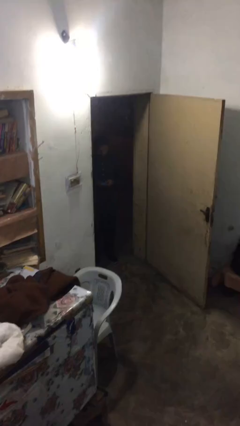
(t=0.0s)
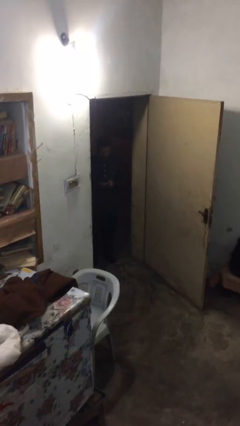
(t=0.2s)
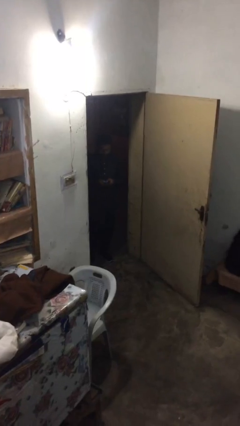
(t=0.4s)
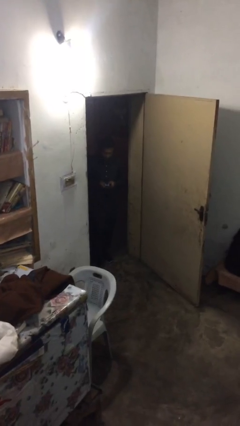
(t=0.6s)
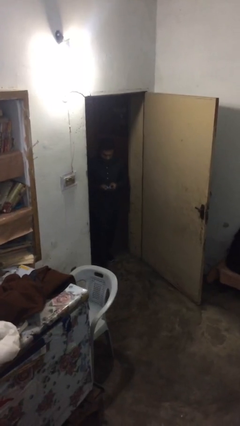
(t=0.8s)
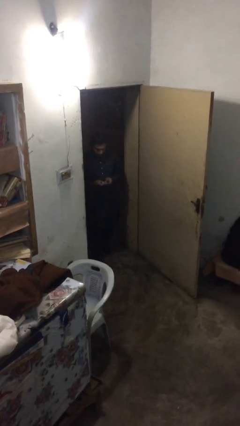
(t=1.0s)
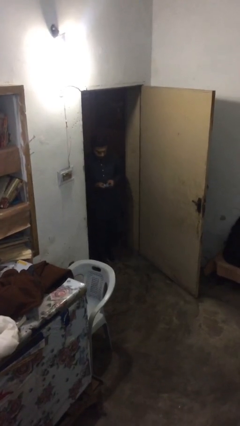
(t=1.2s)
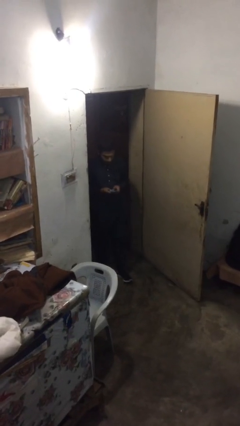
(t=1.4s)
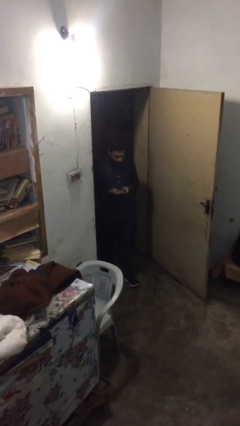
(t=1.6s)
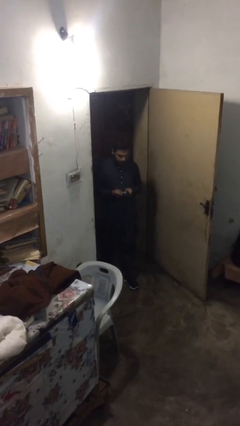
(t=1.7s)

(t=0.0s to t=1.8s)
person enters scene through structure

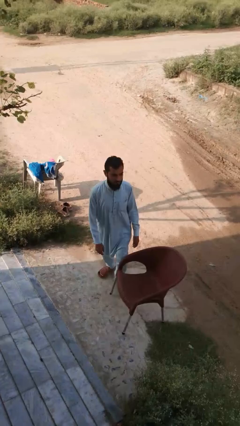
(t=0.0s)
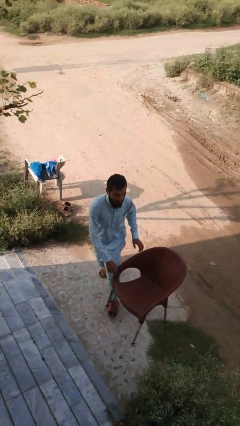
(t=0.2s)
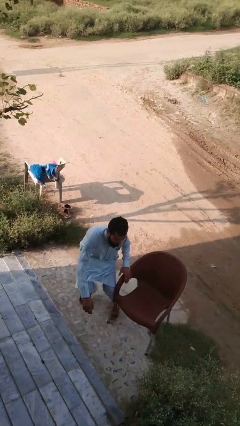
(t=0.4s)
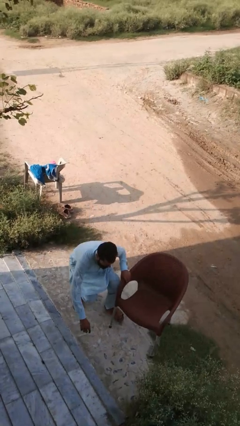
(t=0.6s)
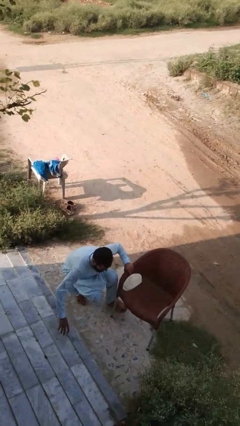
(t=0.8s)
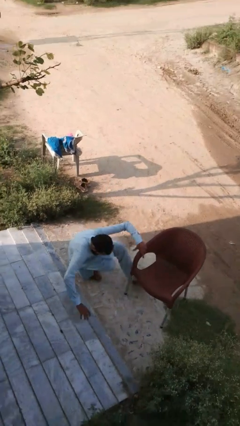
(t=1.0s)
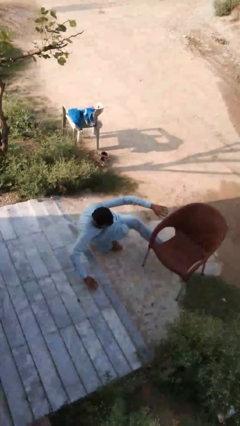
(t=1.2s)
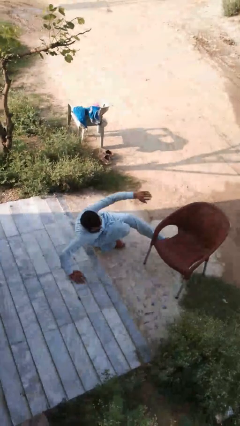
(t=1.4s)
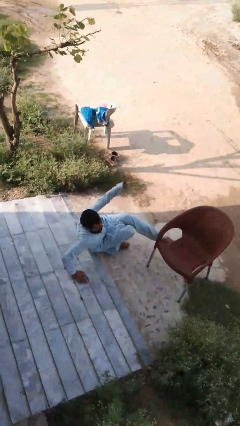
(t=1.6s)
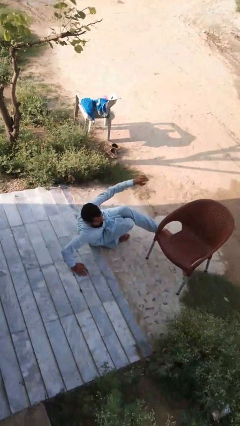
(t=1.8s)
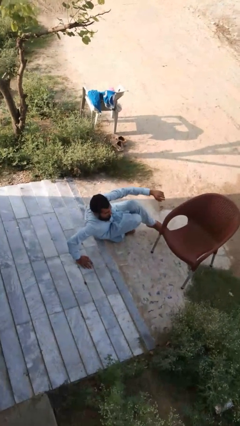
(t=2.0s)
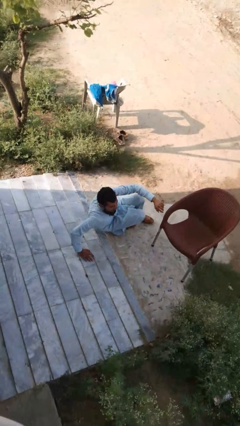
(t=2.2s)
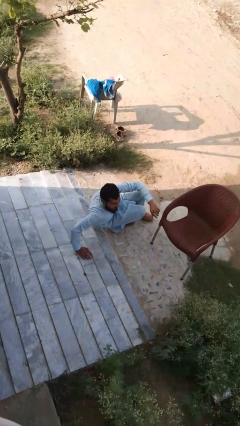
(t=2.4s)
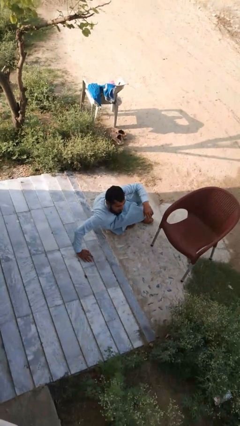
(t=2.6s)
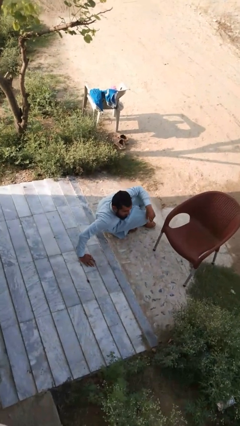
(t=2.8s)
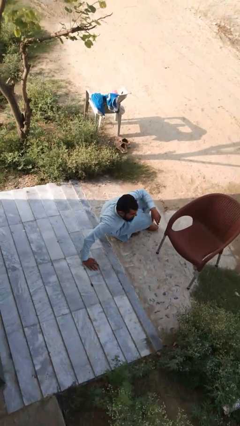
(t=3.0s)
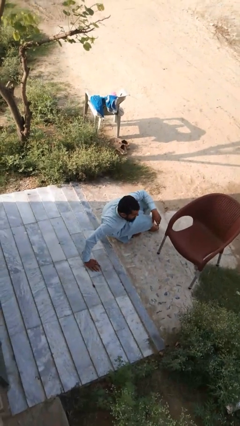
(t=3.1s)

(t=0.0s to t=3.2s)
person trips on object on floor

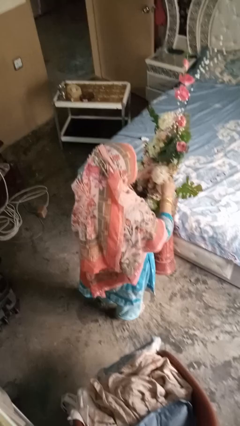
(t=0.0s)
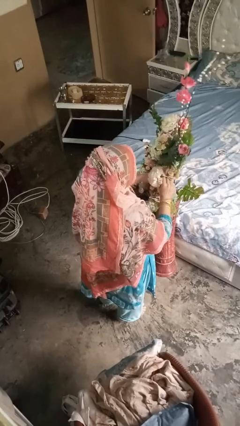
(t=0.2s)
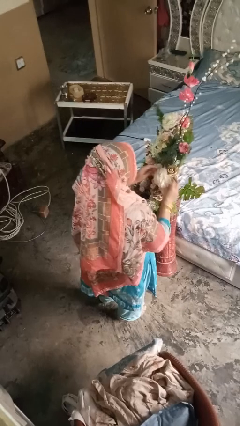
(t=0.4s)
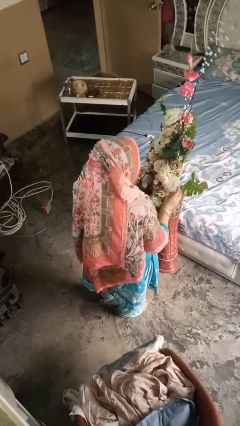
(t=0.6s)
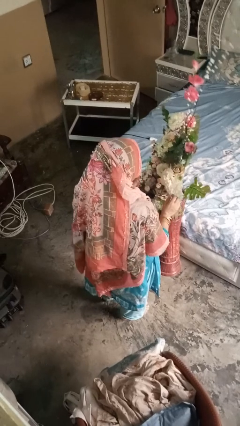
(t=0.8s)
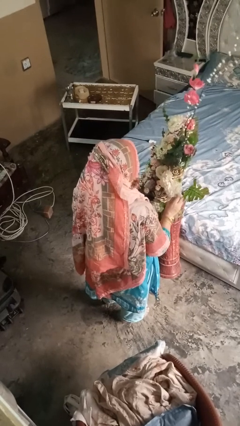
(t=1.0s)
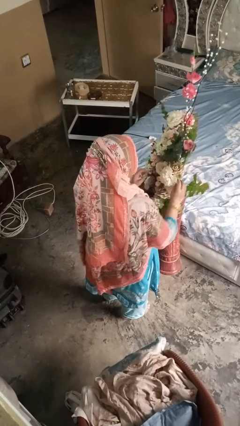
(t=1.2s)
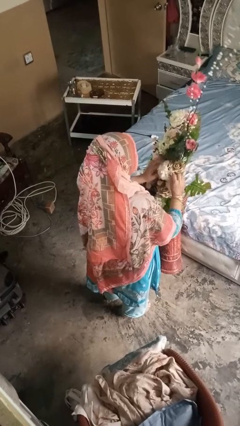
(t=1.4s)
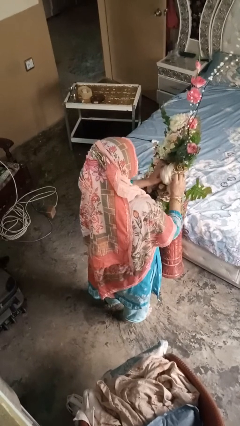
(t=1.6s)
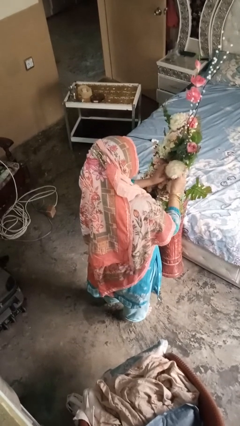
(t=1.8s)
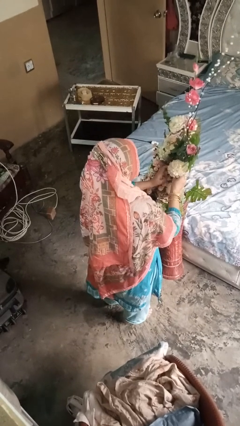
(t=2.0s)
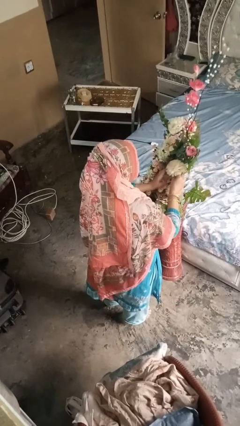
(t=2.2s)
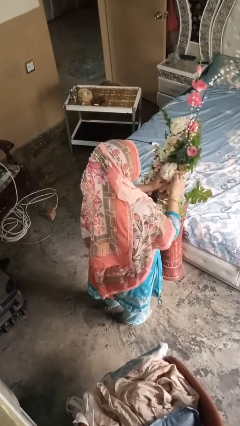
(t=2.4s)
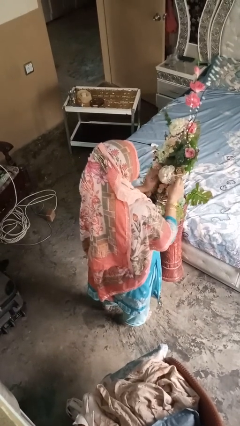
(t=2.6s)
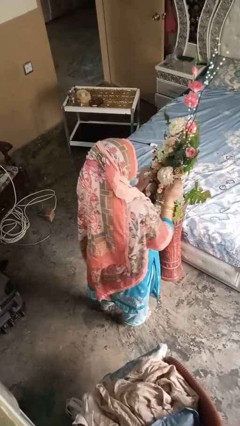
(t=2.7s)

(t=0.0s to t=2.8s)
person arranges flowers in vase

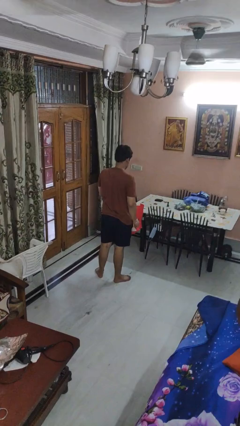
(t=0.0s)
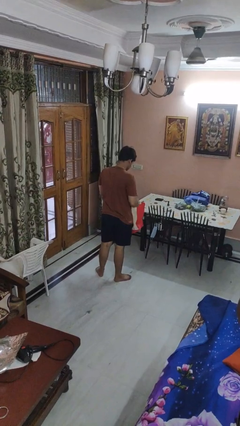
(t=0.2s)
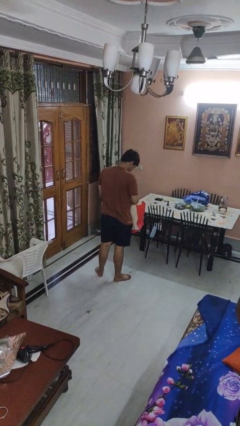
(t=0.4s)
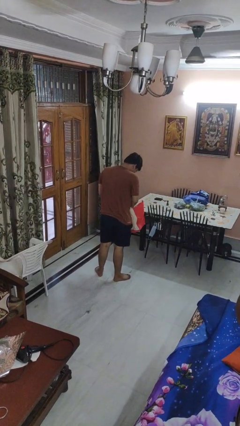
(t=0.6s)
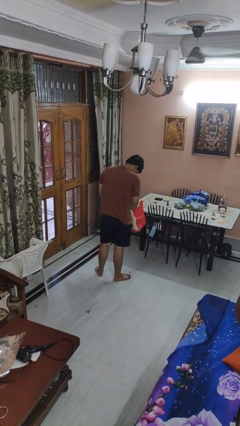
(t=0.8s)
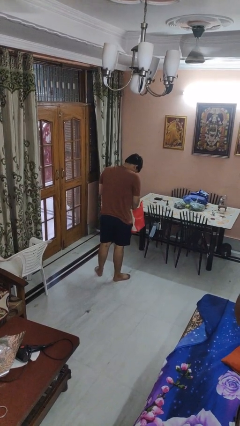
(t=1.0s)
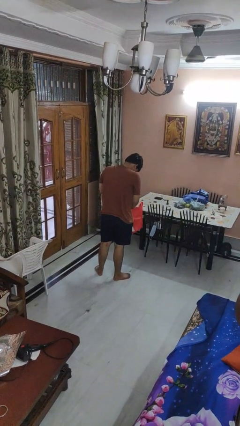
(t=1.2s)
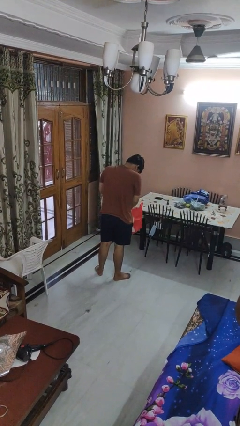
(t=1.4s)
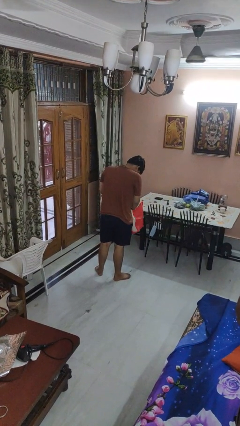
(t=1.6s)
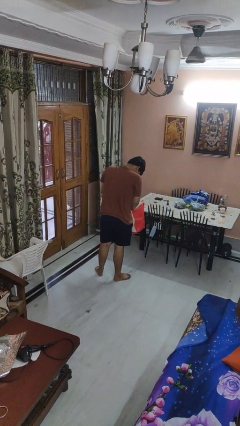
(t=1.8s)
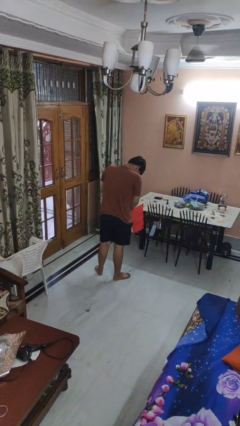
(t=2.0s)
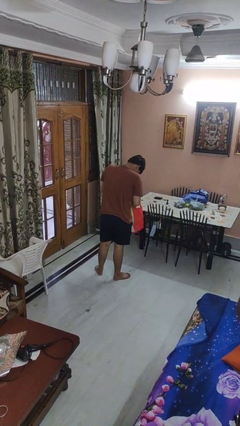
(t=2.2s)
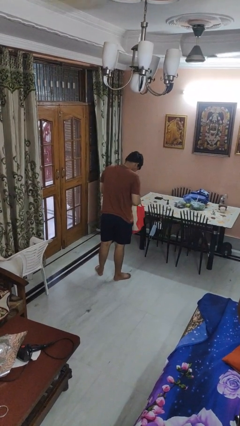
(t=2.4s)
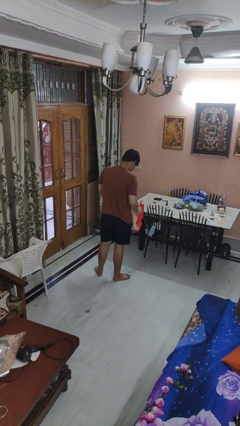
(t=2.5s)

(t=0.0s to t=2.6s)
person searches in bag

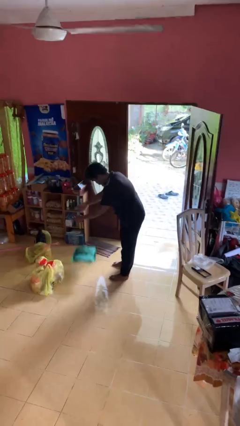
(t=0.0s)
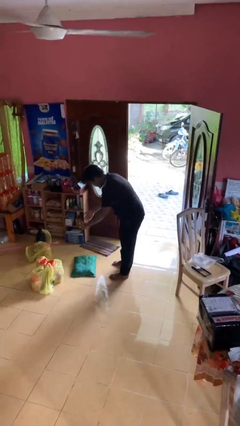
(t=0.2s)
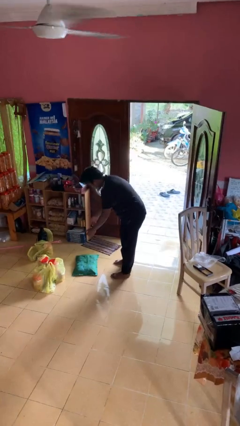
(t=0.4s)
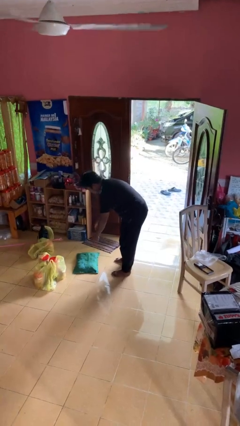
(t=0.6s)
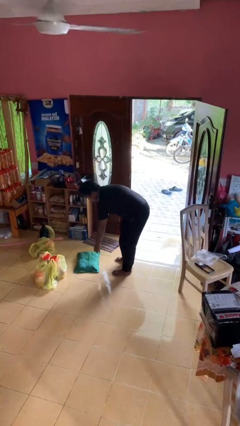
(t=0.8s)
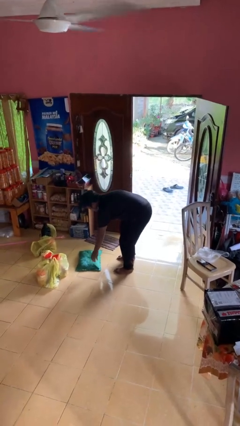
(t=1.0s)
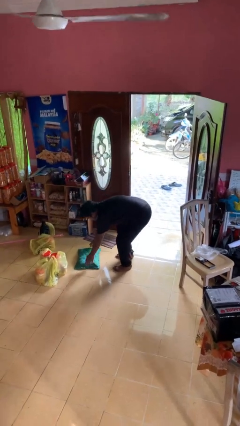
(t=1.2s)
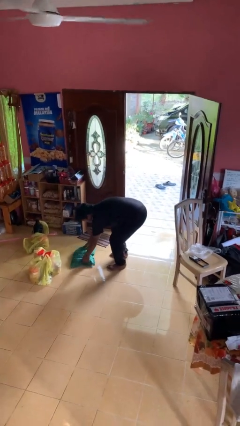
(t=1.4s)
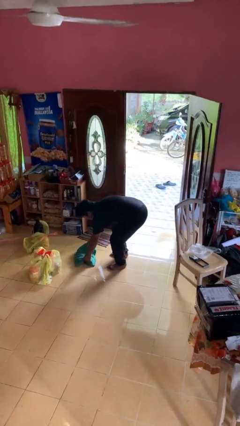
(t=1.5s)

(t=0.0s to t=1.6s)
person catches dropped object

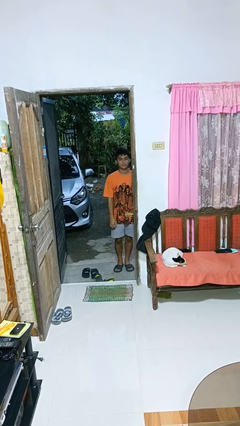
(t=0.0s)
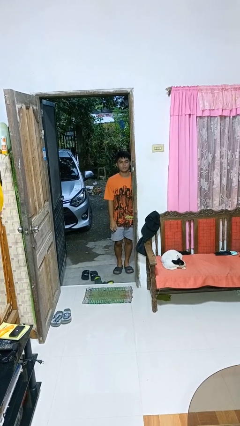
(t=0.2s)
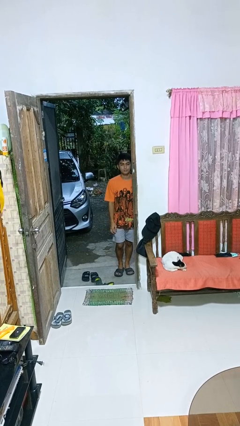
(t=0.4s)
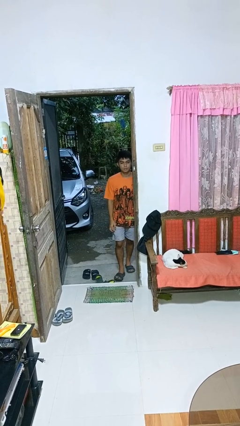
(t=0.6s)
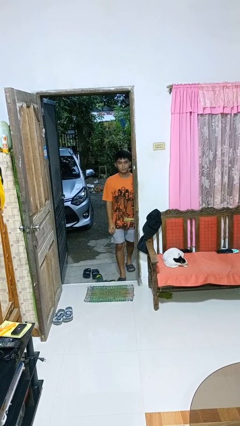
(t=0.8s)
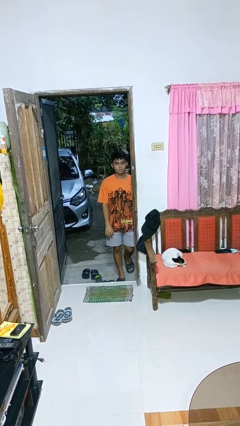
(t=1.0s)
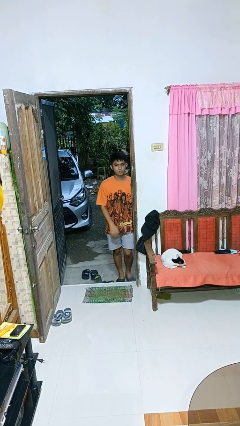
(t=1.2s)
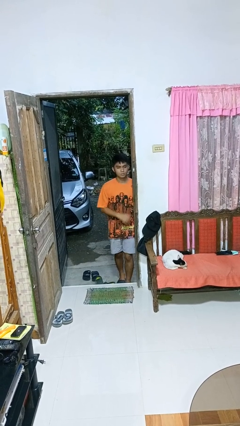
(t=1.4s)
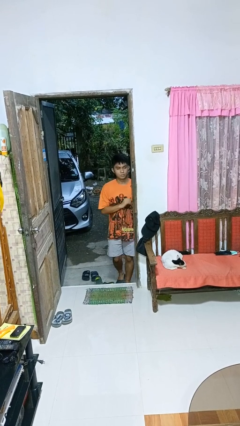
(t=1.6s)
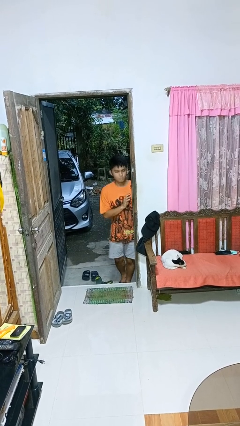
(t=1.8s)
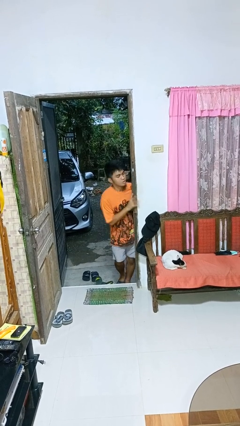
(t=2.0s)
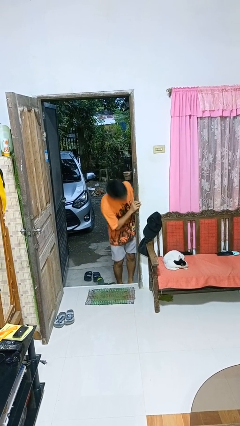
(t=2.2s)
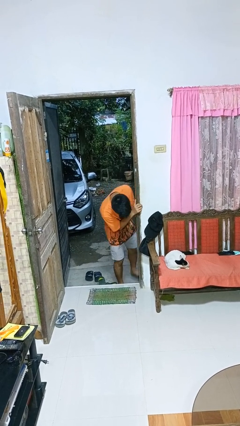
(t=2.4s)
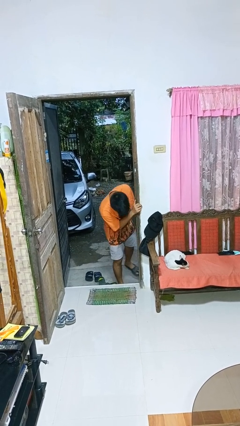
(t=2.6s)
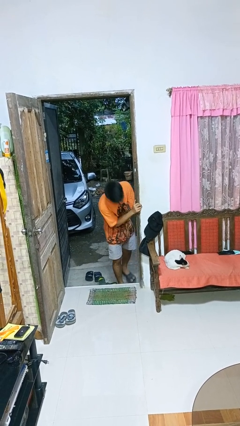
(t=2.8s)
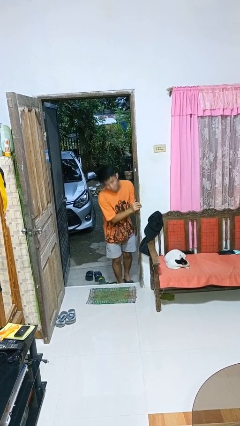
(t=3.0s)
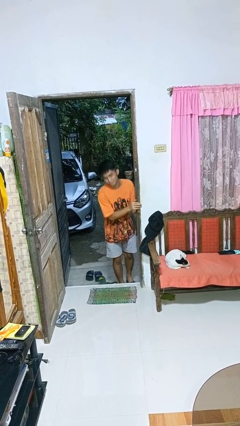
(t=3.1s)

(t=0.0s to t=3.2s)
person bumps into wall

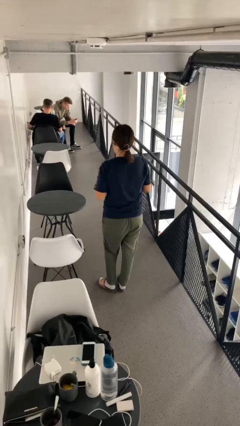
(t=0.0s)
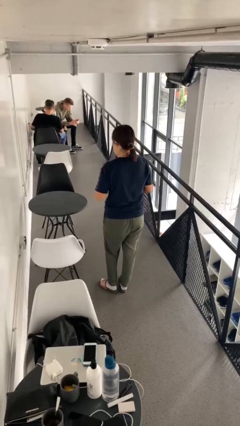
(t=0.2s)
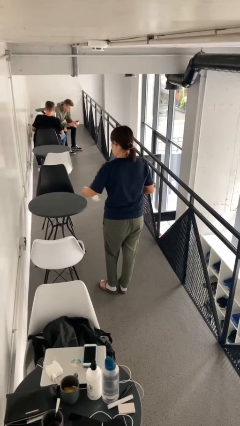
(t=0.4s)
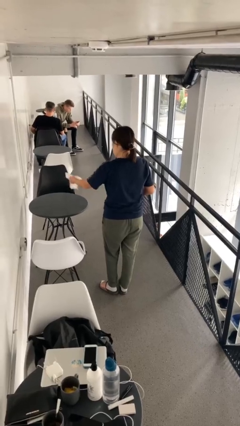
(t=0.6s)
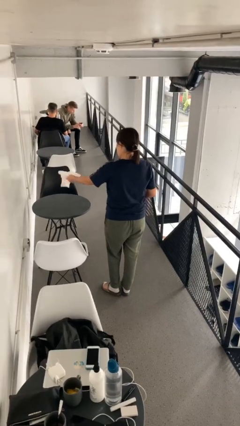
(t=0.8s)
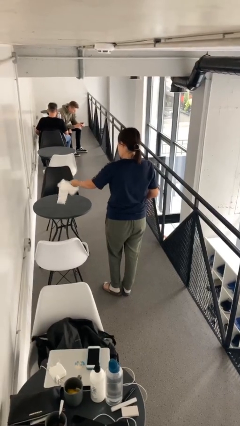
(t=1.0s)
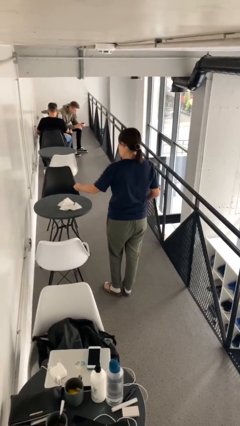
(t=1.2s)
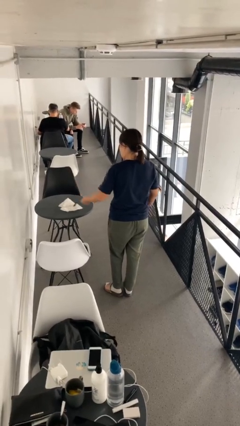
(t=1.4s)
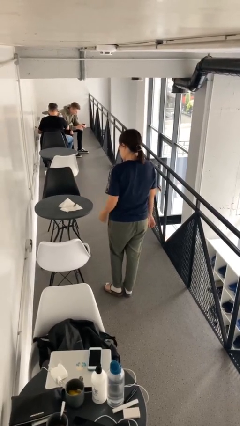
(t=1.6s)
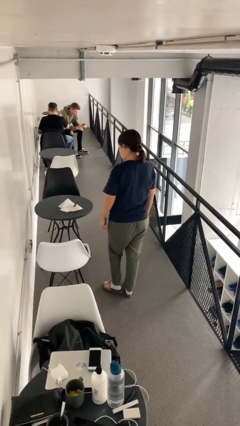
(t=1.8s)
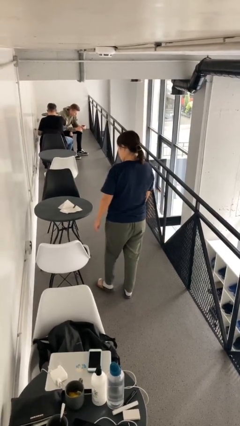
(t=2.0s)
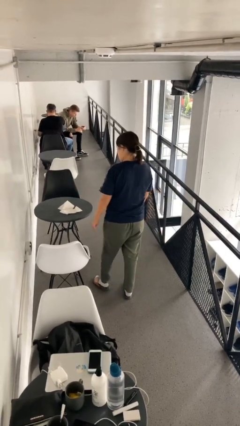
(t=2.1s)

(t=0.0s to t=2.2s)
person throws object on table
